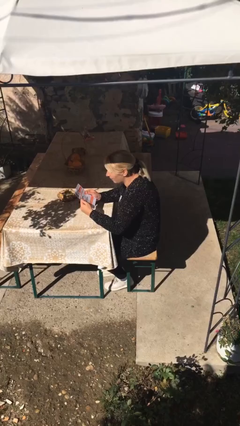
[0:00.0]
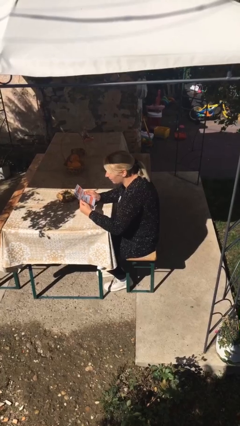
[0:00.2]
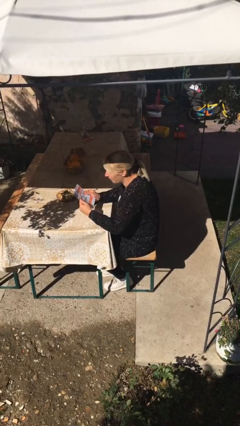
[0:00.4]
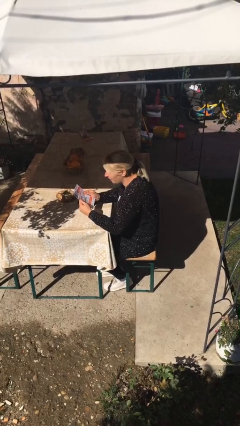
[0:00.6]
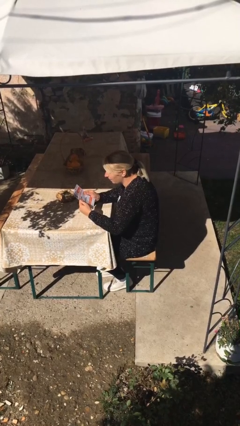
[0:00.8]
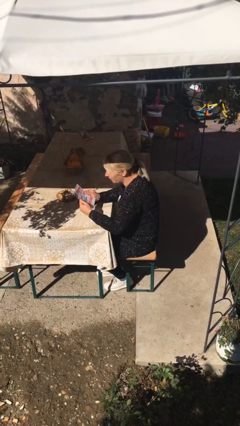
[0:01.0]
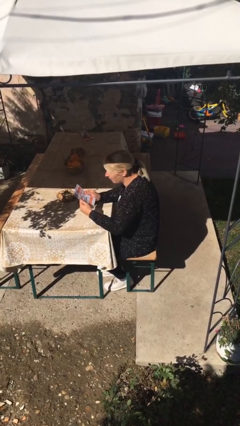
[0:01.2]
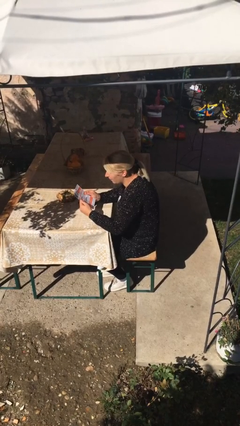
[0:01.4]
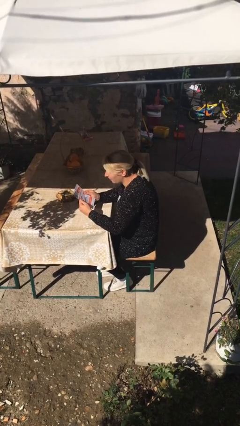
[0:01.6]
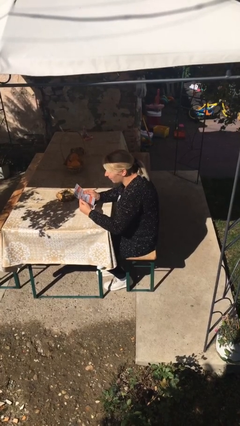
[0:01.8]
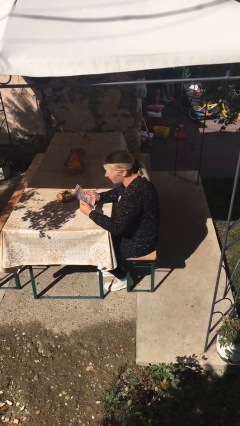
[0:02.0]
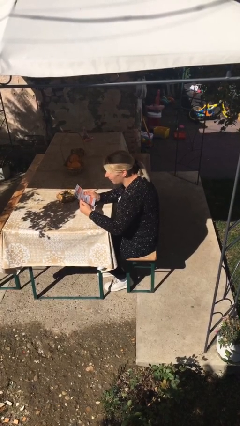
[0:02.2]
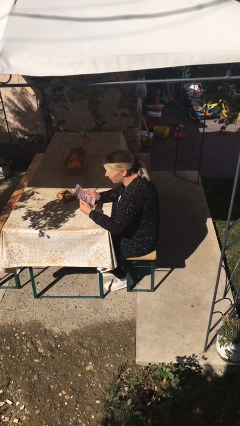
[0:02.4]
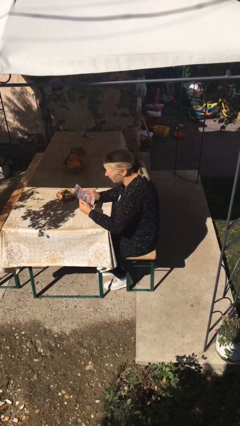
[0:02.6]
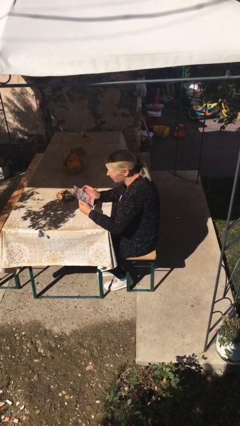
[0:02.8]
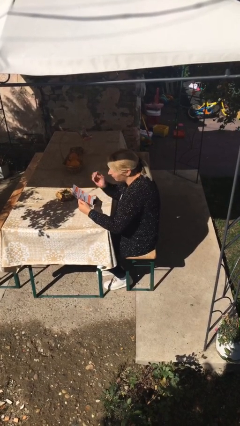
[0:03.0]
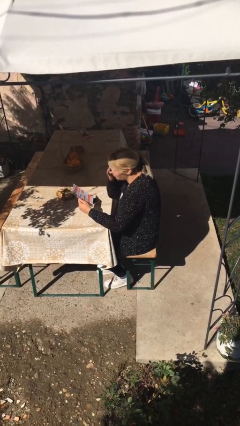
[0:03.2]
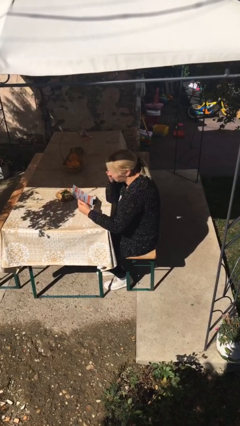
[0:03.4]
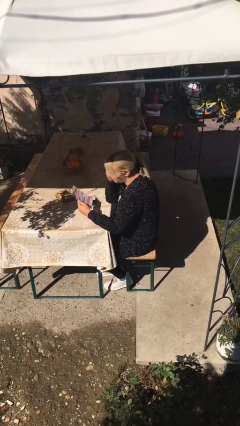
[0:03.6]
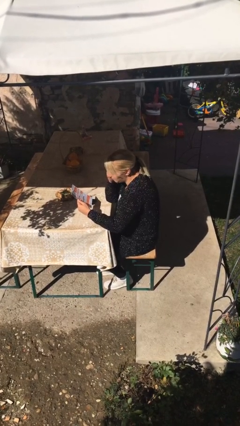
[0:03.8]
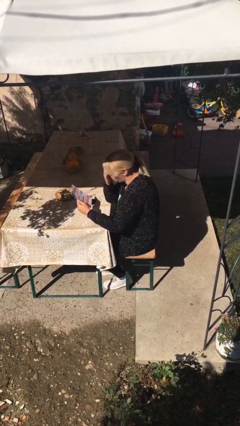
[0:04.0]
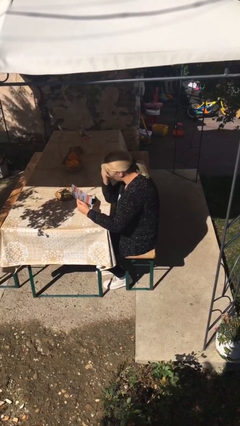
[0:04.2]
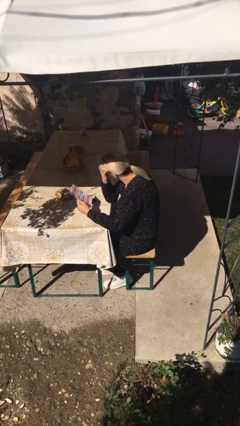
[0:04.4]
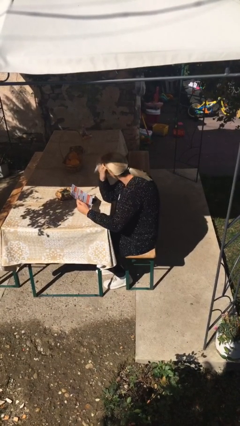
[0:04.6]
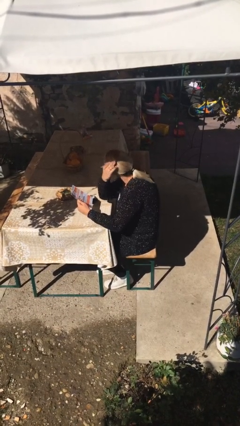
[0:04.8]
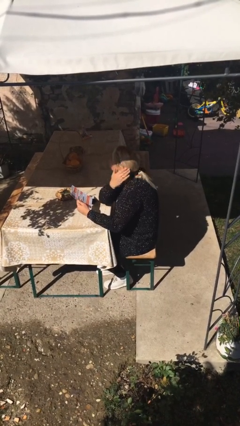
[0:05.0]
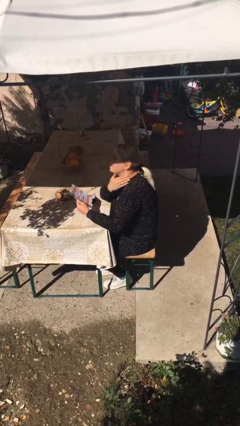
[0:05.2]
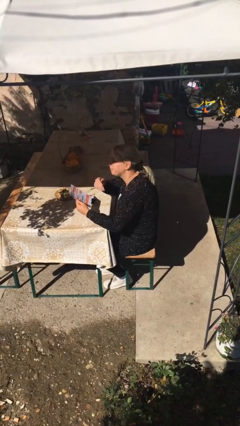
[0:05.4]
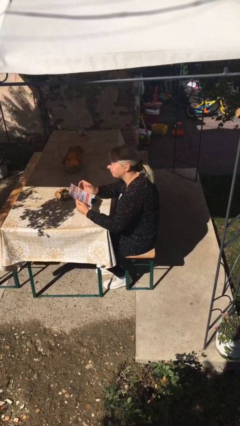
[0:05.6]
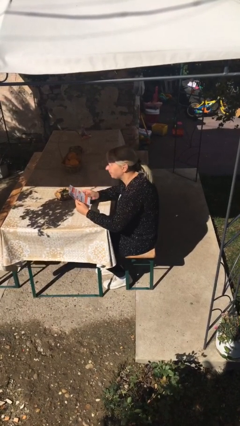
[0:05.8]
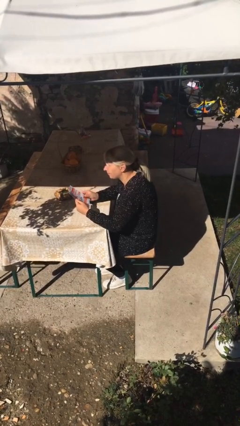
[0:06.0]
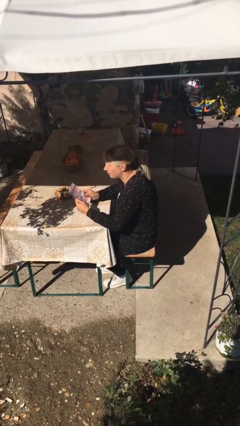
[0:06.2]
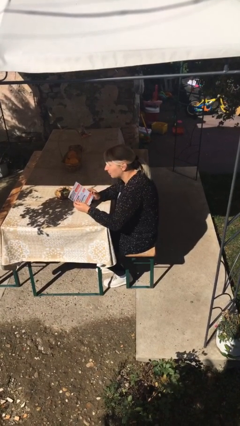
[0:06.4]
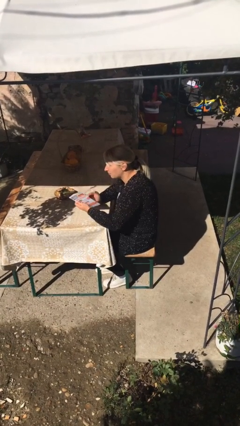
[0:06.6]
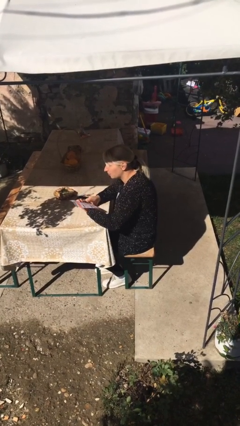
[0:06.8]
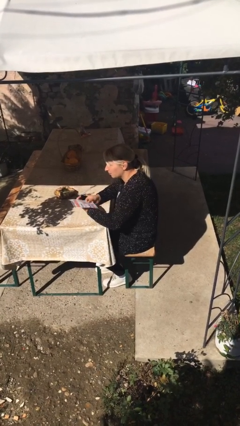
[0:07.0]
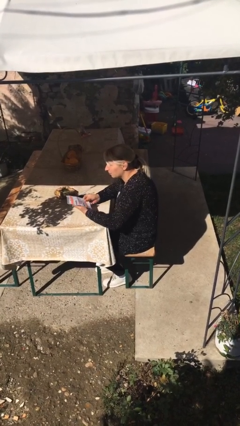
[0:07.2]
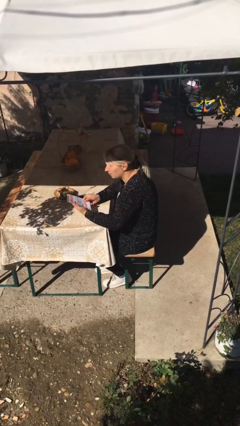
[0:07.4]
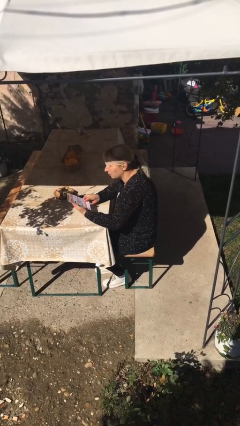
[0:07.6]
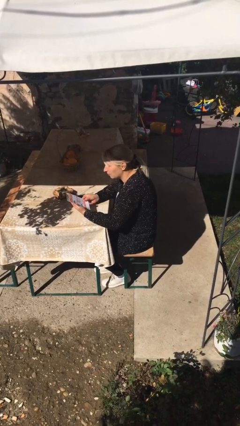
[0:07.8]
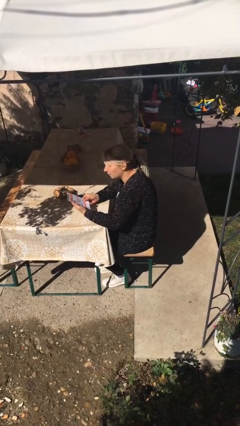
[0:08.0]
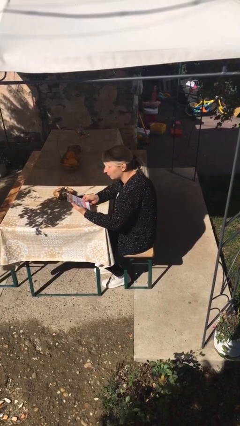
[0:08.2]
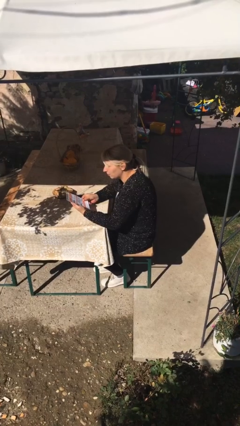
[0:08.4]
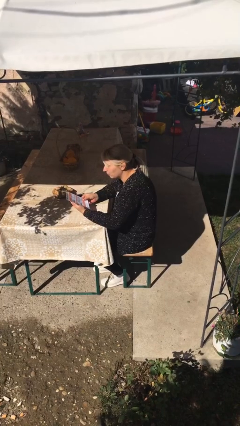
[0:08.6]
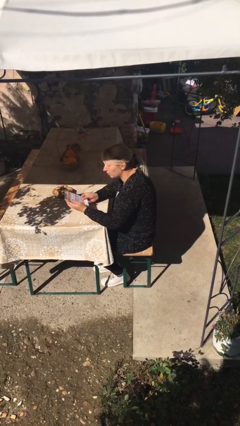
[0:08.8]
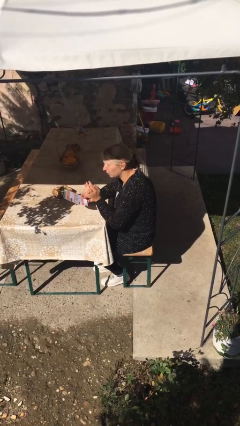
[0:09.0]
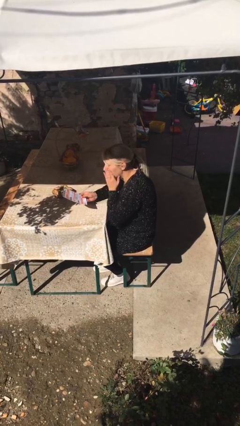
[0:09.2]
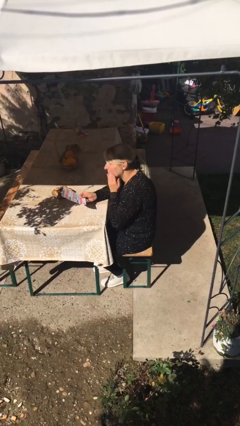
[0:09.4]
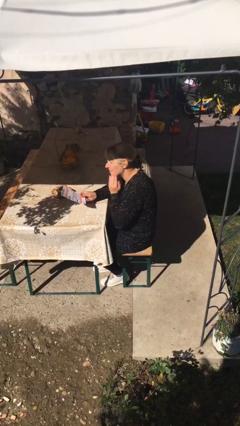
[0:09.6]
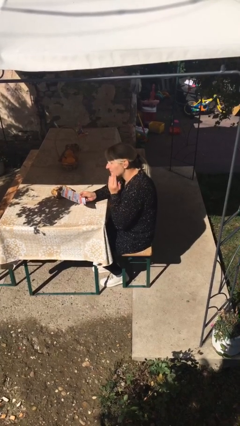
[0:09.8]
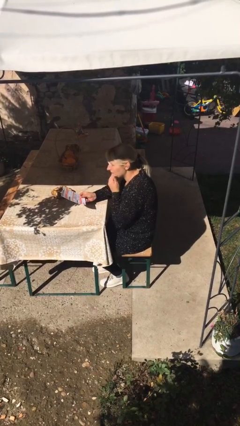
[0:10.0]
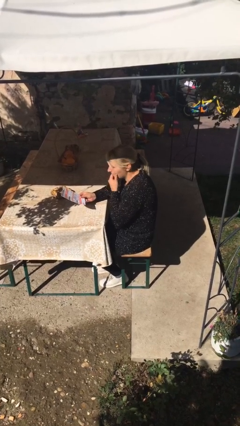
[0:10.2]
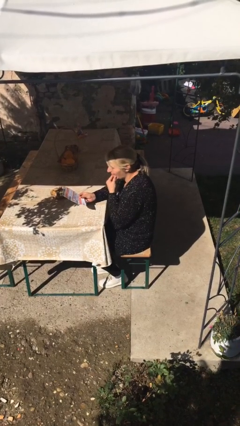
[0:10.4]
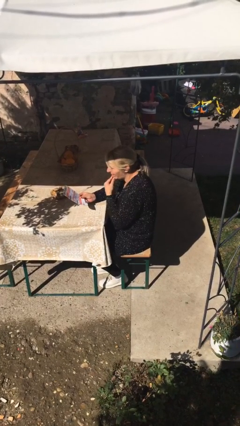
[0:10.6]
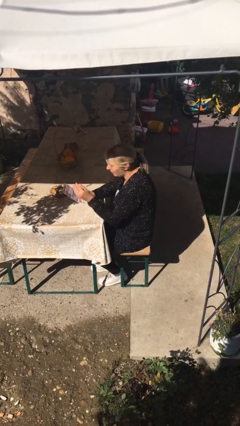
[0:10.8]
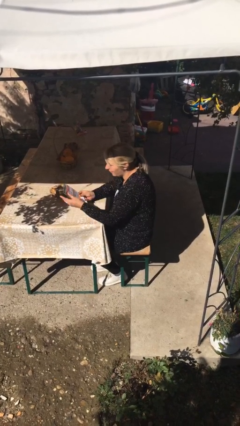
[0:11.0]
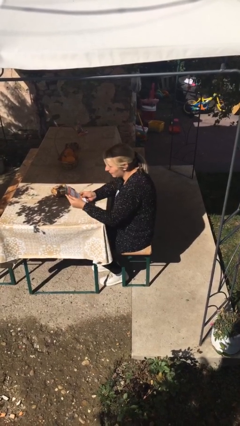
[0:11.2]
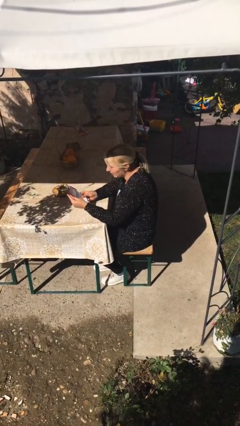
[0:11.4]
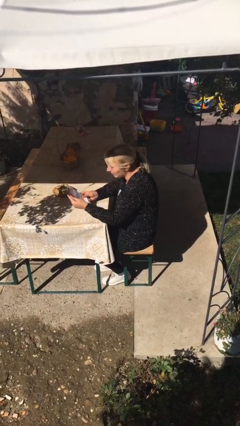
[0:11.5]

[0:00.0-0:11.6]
person reads document

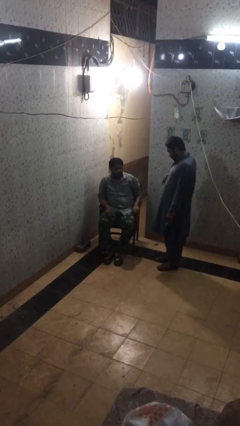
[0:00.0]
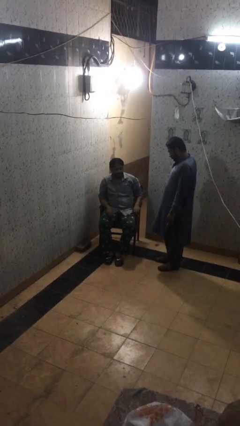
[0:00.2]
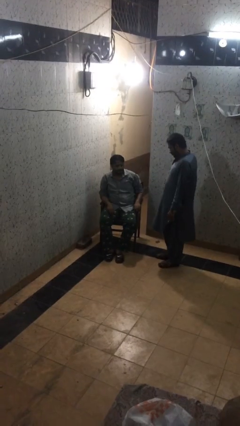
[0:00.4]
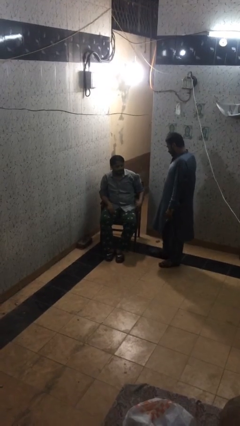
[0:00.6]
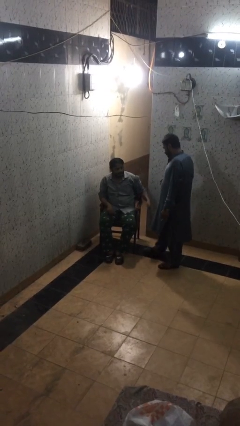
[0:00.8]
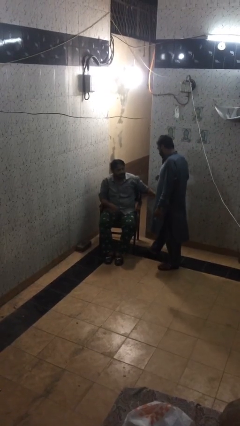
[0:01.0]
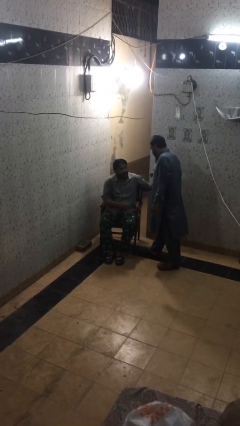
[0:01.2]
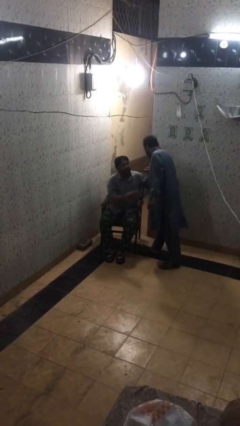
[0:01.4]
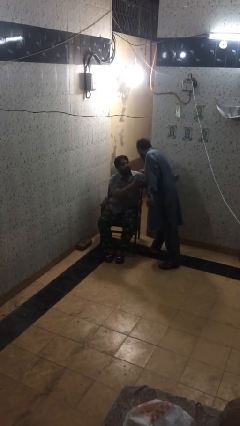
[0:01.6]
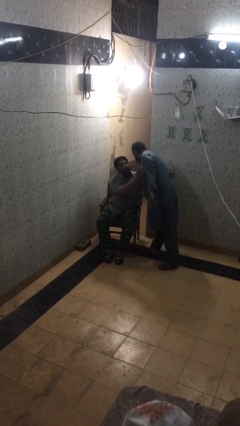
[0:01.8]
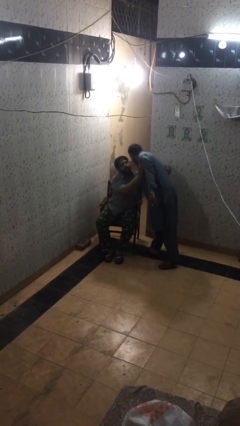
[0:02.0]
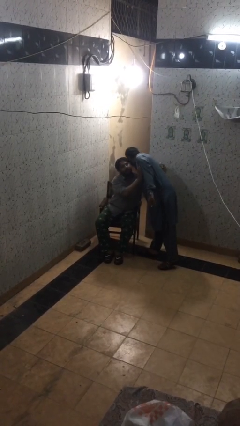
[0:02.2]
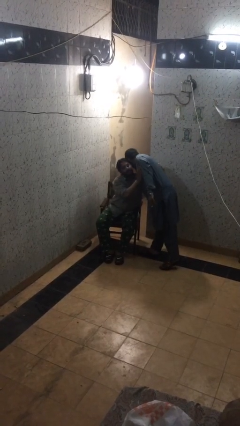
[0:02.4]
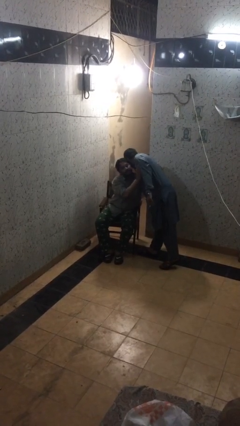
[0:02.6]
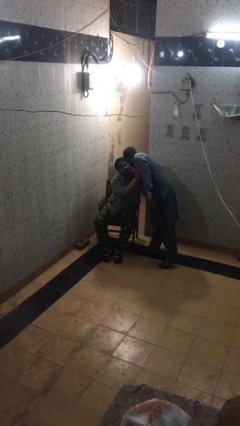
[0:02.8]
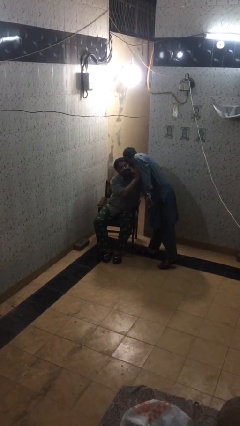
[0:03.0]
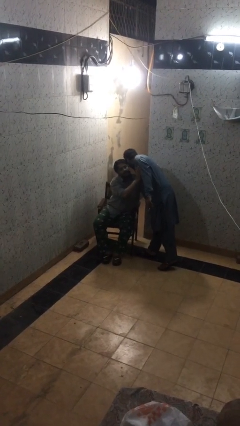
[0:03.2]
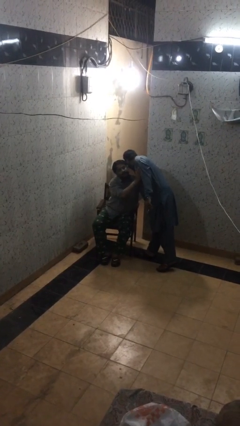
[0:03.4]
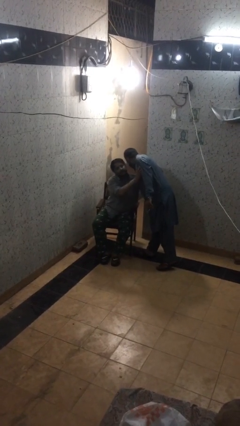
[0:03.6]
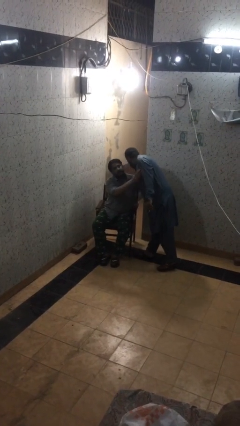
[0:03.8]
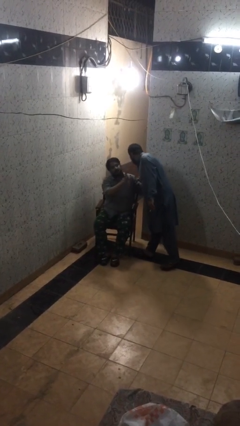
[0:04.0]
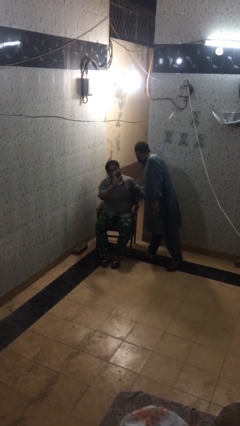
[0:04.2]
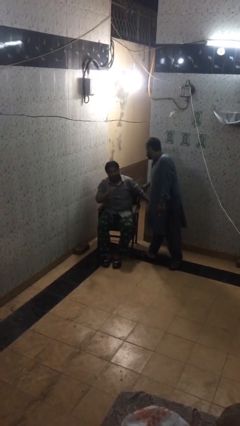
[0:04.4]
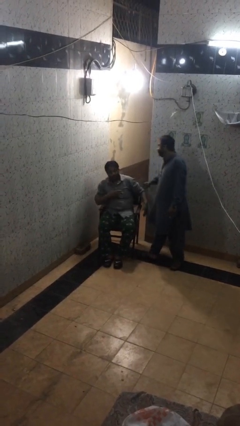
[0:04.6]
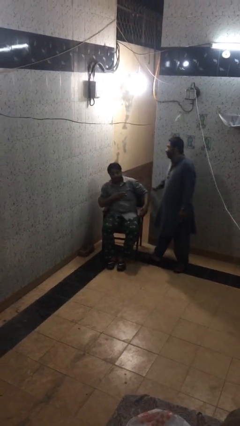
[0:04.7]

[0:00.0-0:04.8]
person embraces person

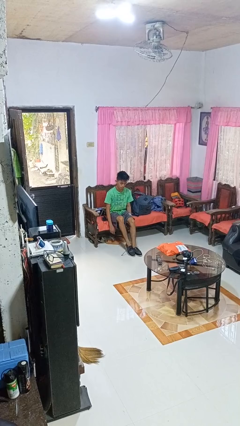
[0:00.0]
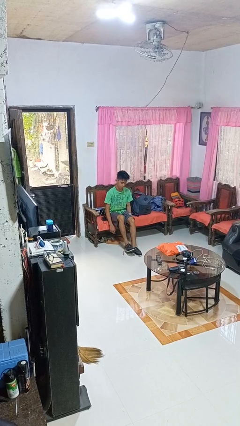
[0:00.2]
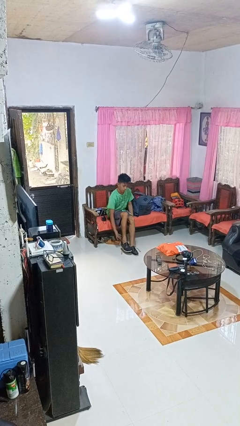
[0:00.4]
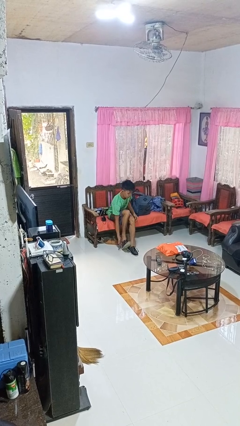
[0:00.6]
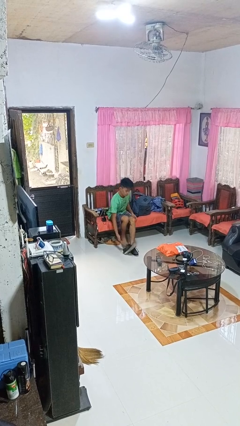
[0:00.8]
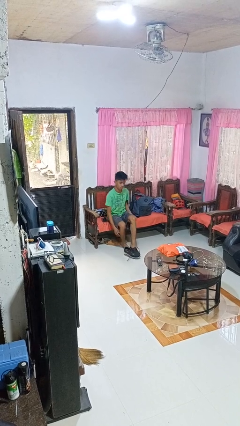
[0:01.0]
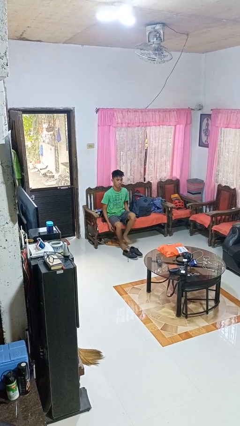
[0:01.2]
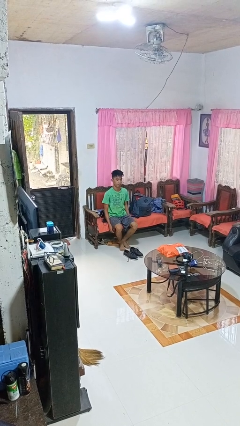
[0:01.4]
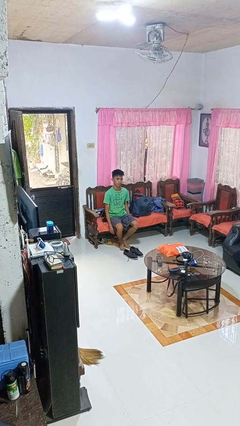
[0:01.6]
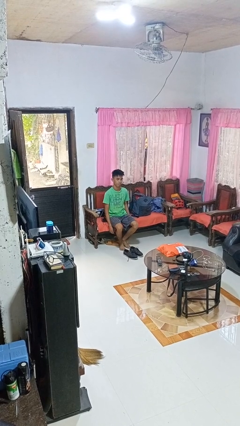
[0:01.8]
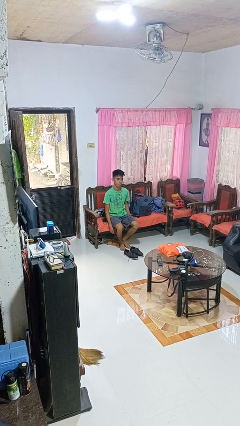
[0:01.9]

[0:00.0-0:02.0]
person takes off shoes
